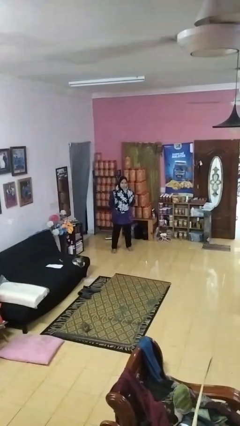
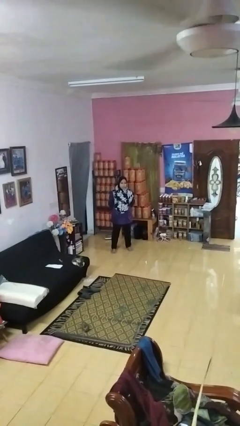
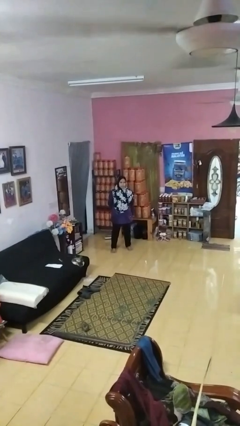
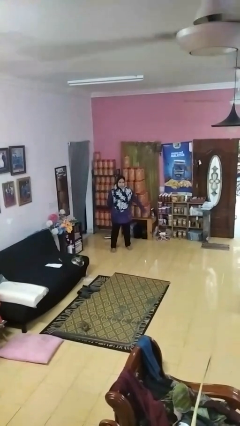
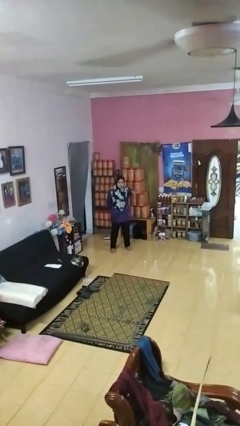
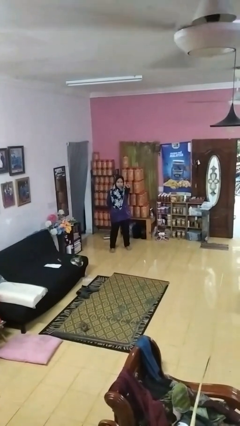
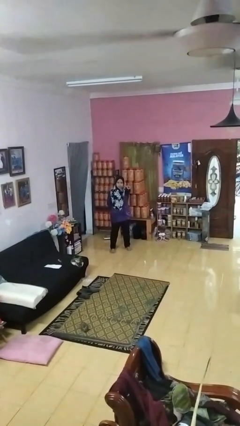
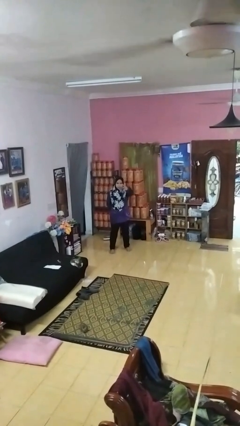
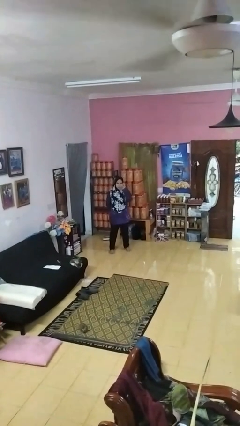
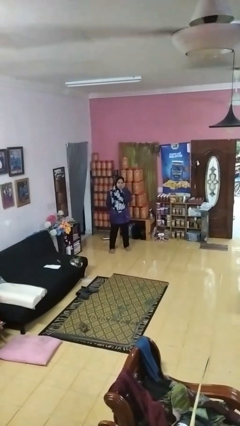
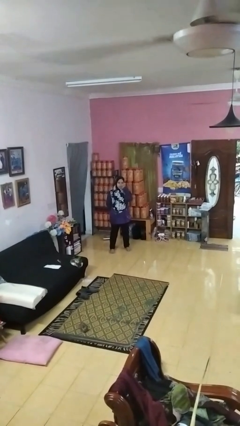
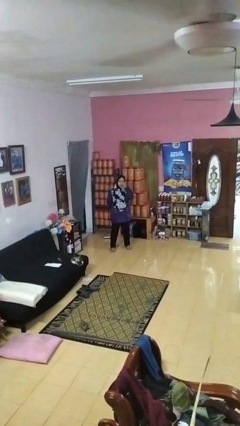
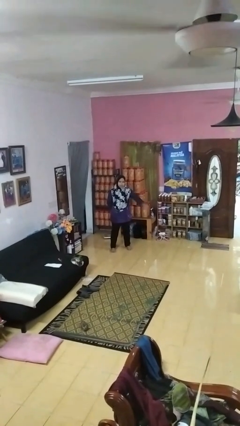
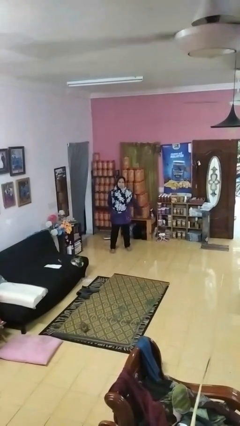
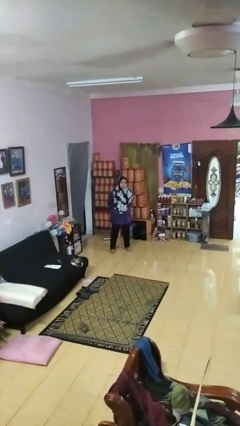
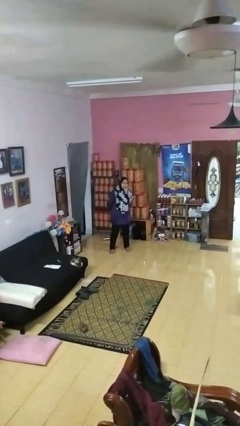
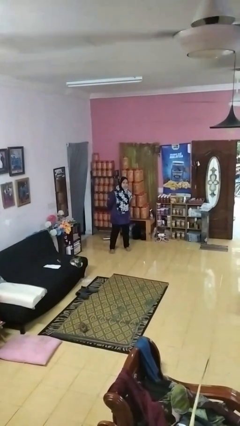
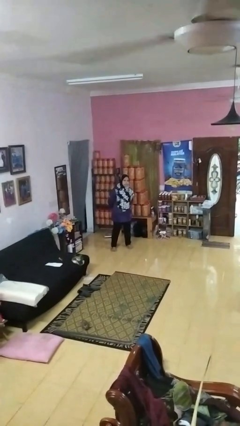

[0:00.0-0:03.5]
person gestures watch closely

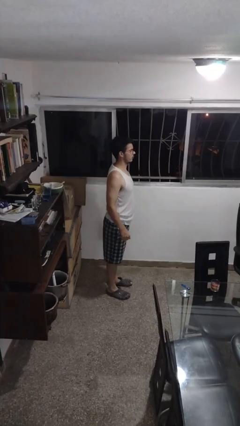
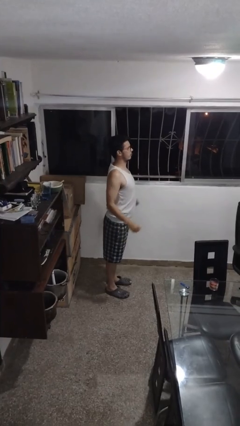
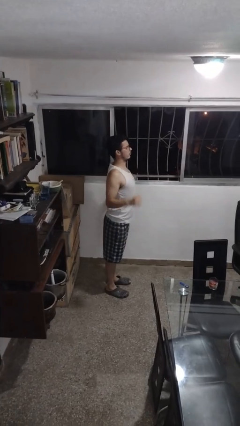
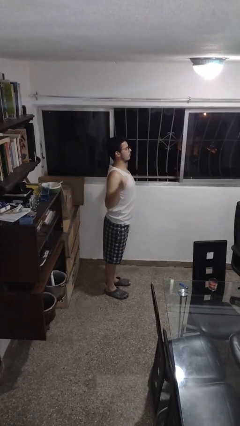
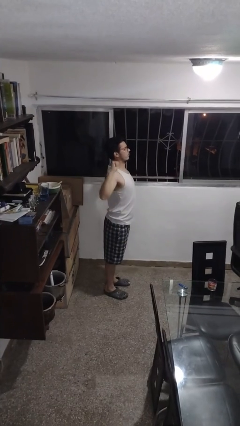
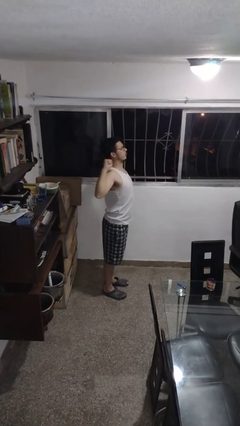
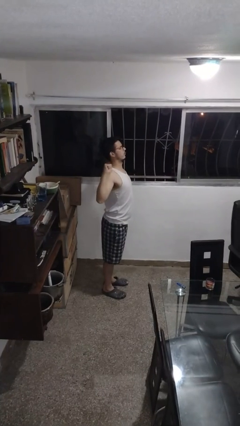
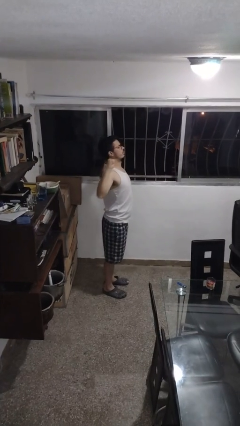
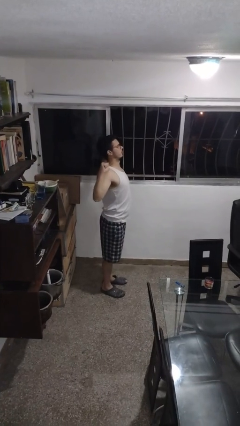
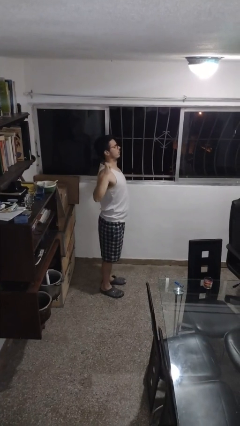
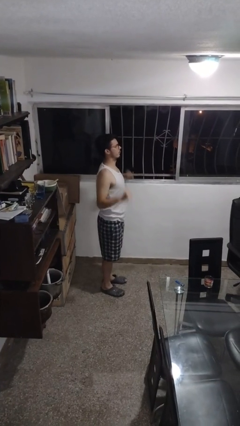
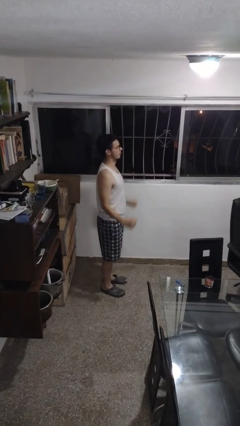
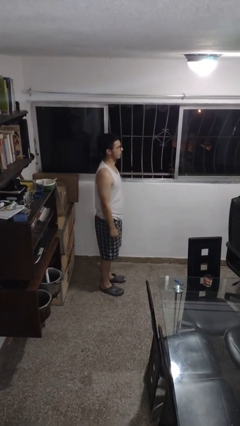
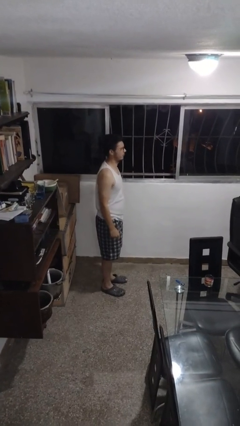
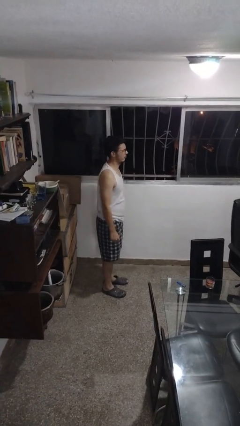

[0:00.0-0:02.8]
person stretches back

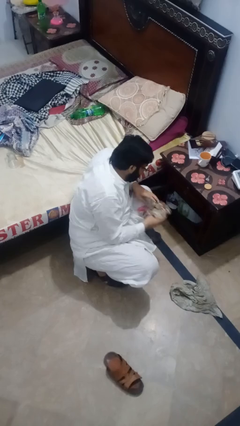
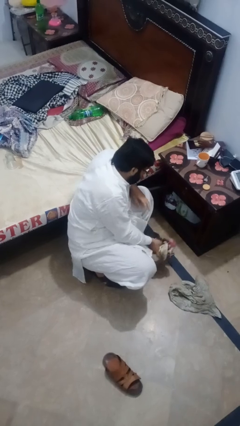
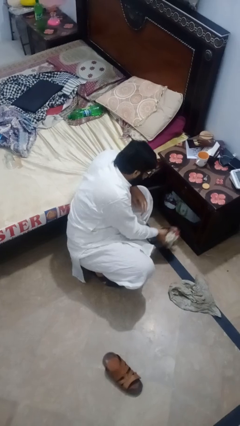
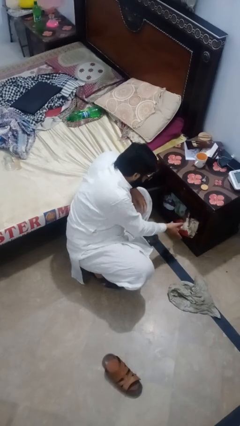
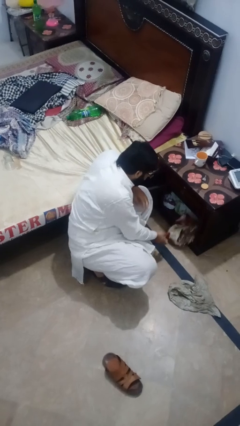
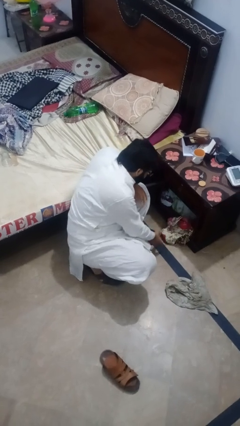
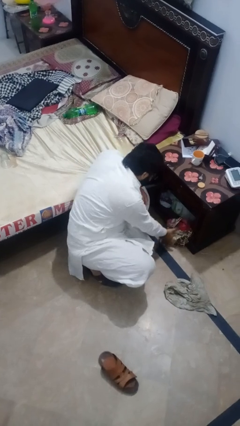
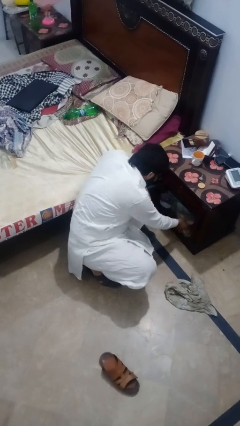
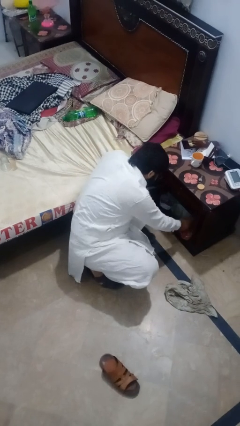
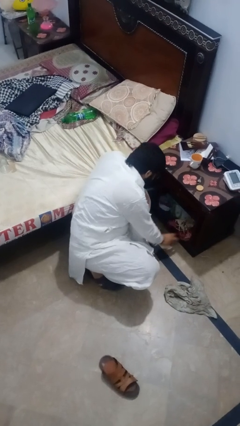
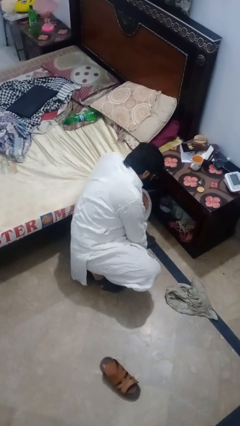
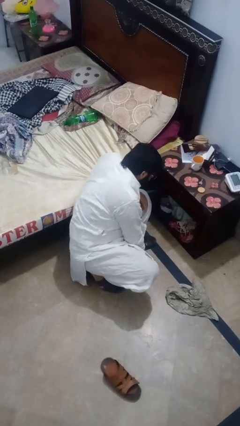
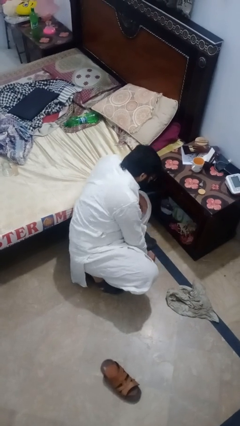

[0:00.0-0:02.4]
person puts down object into cabinet

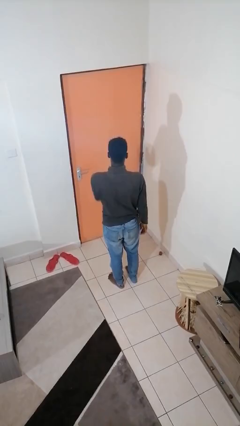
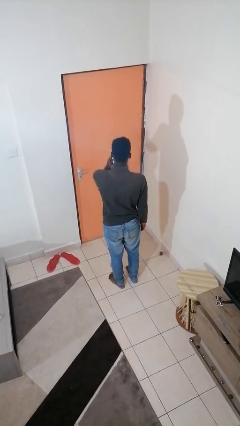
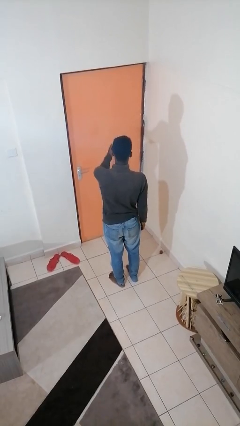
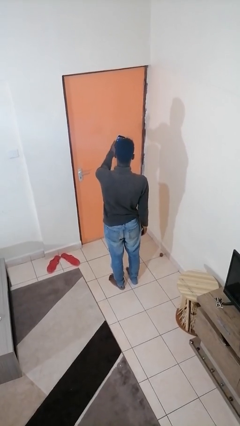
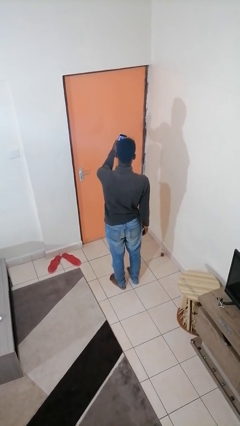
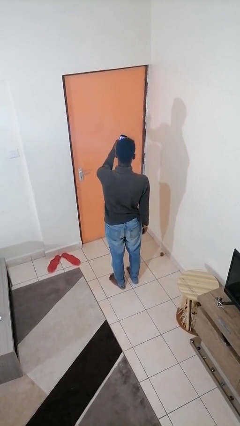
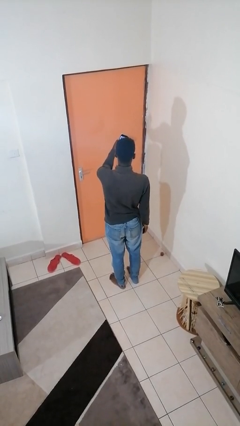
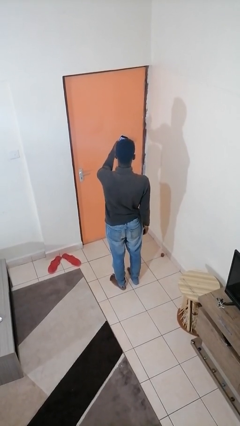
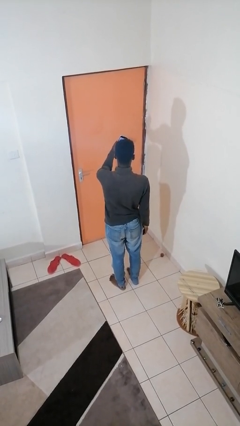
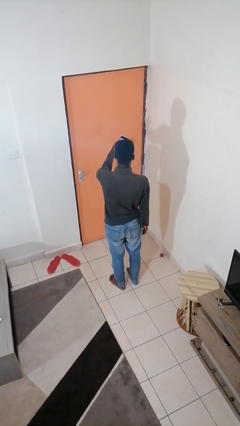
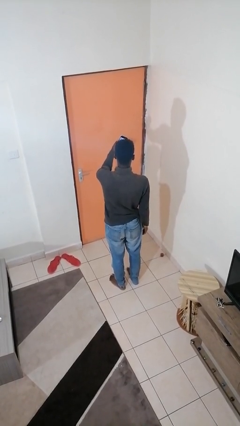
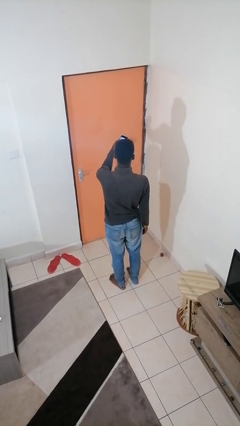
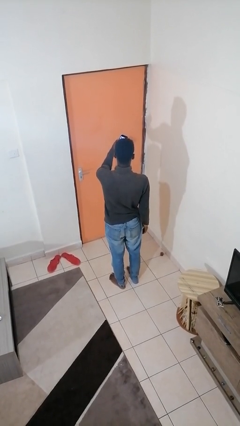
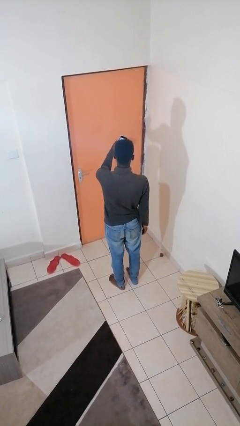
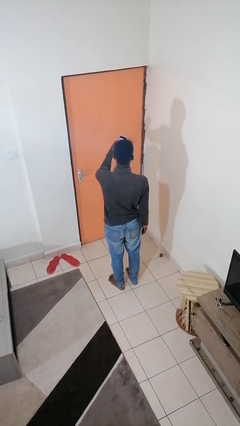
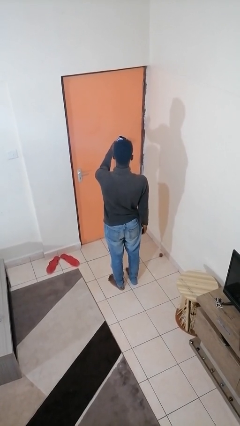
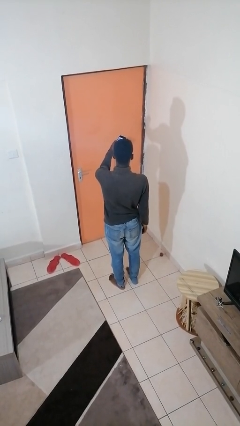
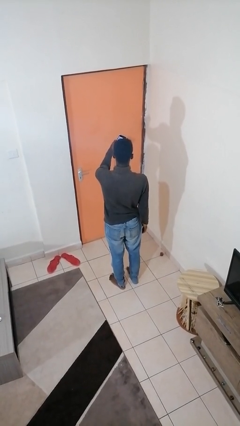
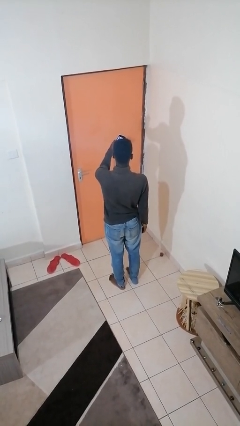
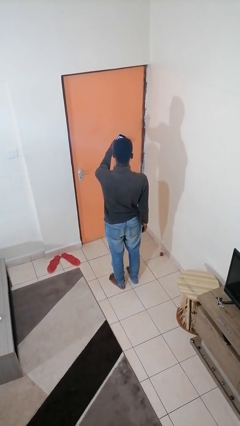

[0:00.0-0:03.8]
person takes selfie

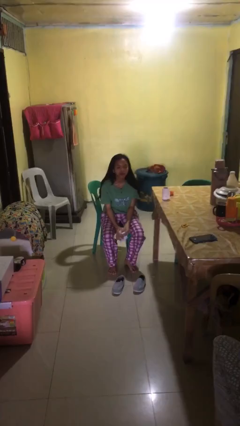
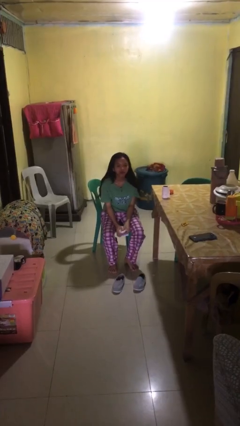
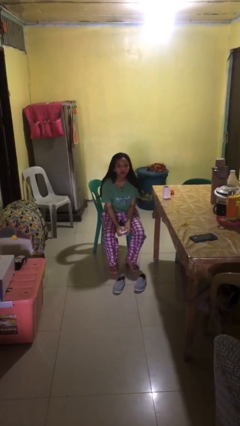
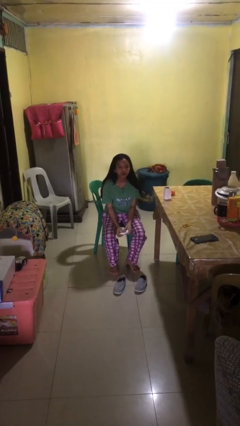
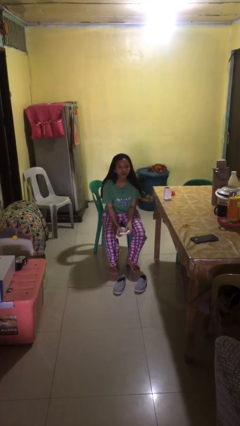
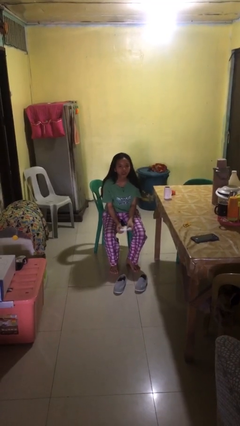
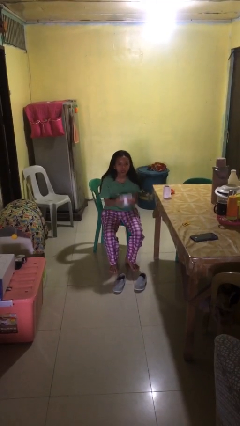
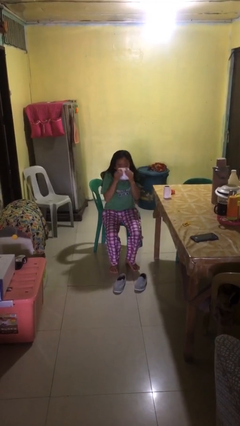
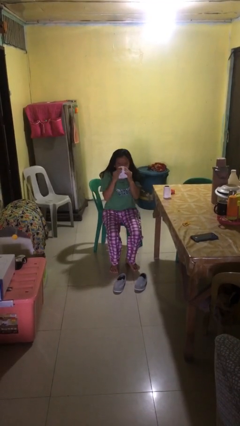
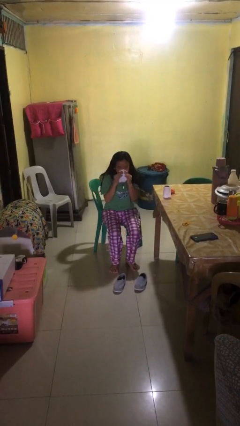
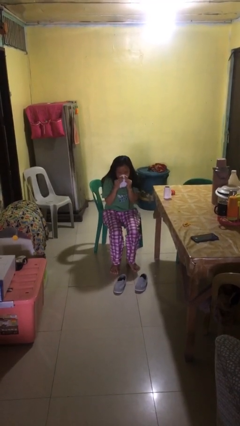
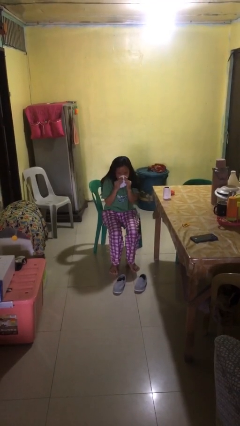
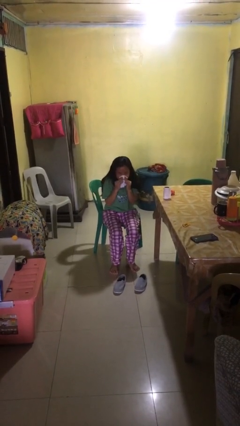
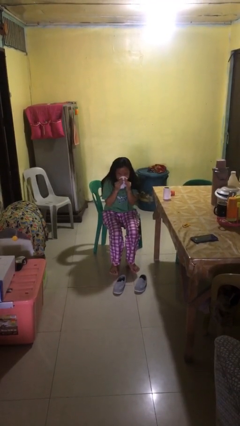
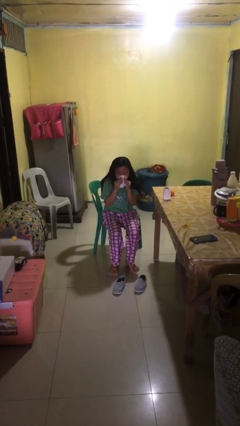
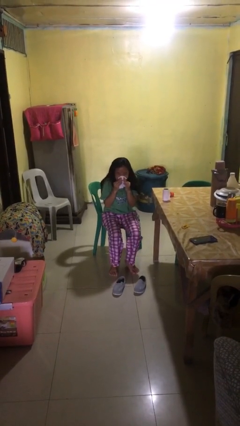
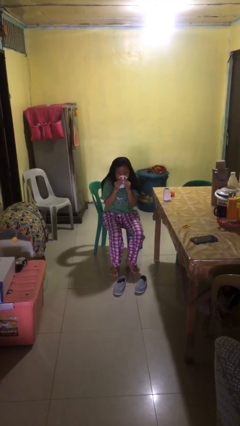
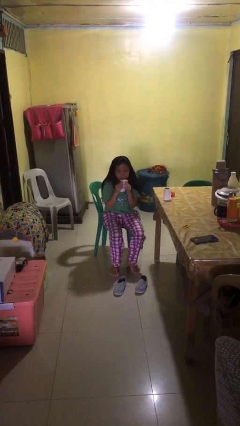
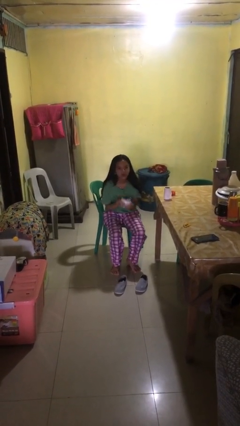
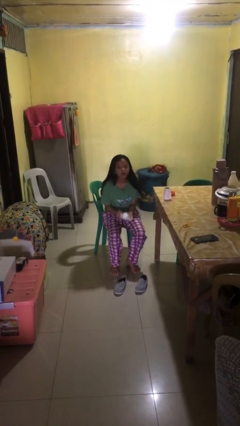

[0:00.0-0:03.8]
person blows nose

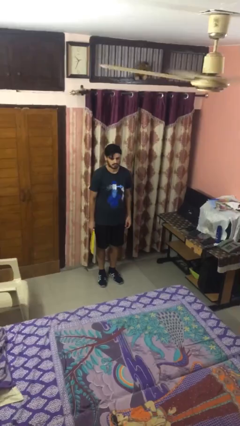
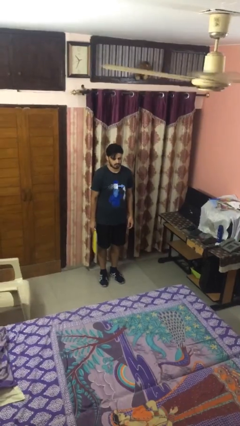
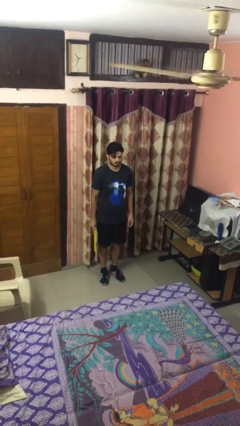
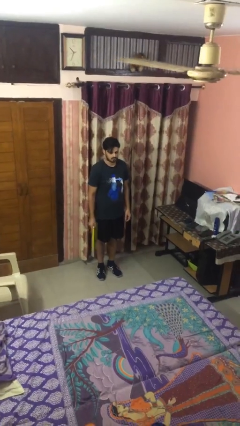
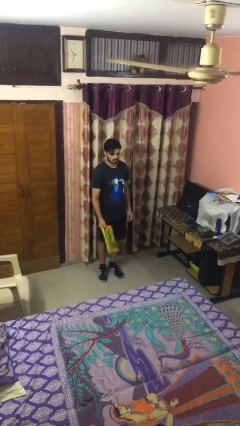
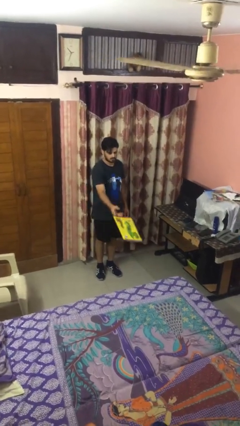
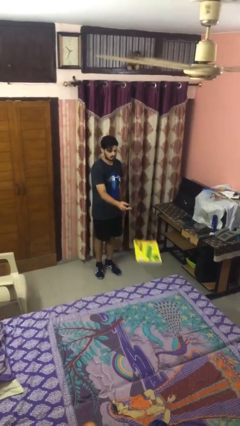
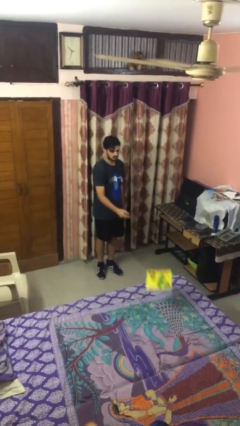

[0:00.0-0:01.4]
person throws object on bed
